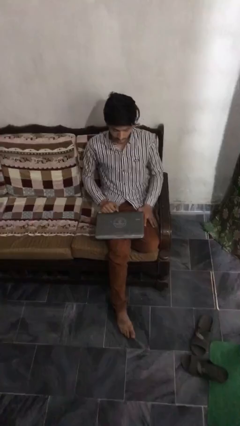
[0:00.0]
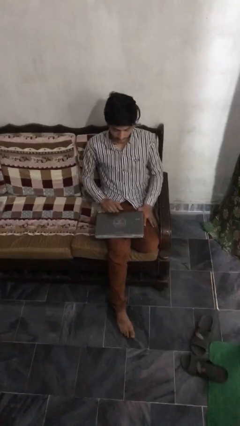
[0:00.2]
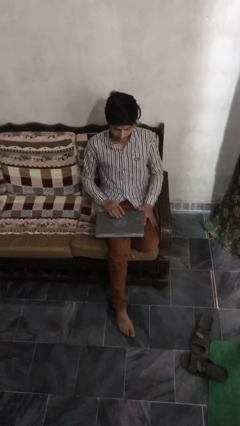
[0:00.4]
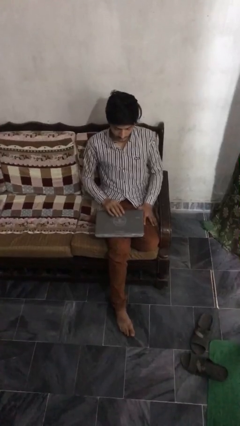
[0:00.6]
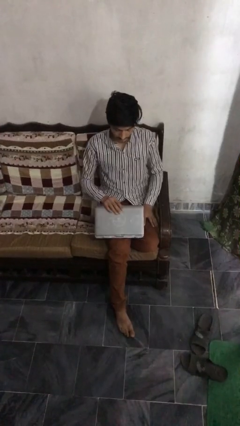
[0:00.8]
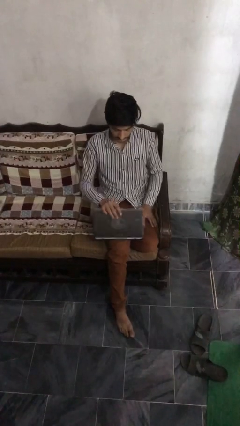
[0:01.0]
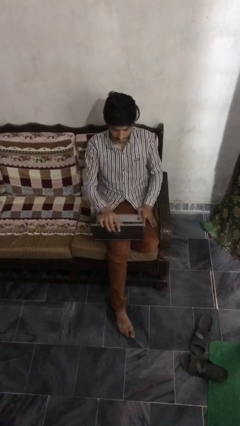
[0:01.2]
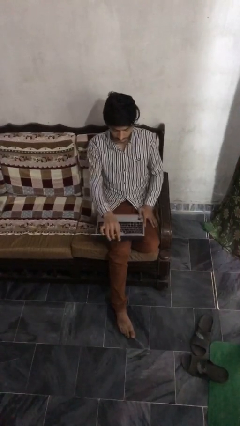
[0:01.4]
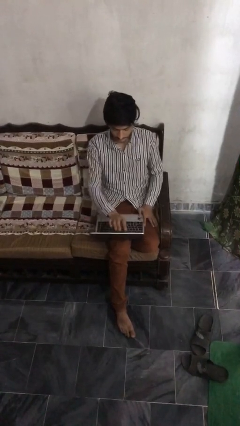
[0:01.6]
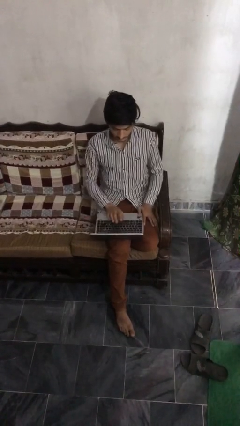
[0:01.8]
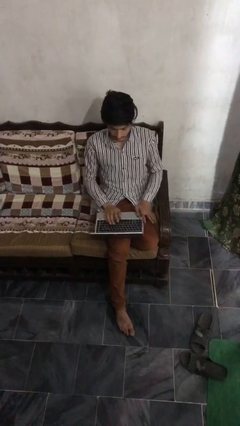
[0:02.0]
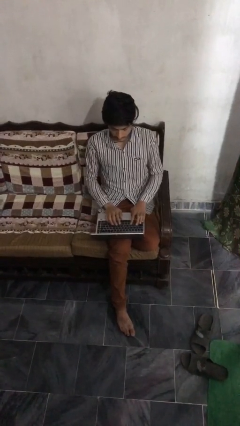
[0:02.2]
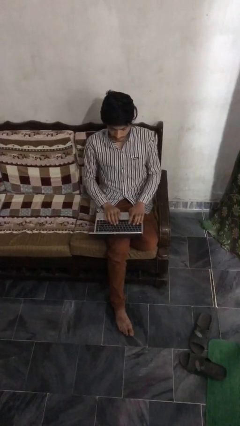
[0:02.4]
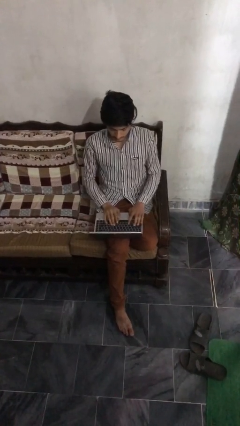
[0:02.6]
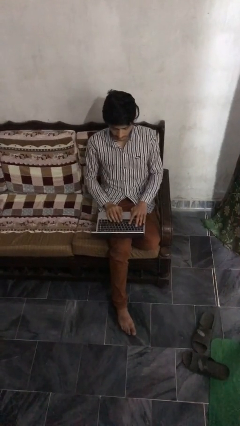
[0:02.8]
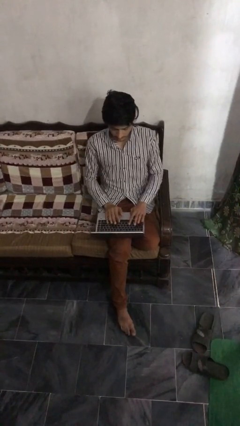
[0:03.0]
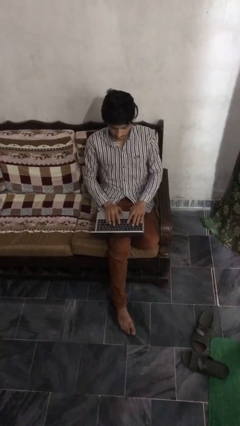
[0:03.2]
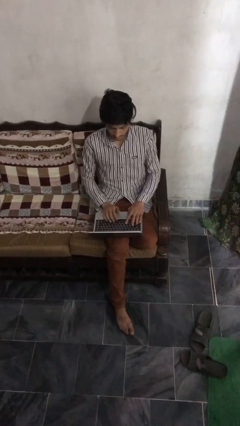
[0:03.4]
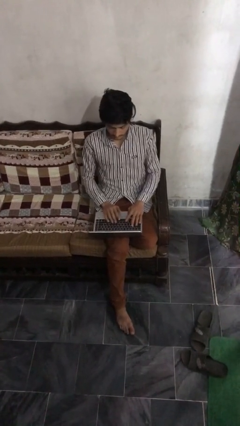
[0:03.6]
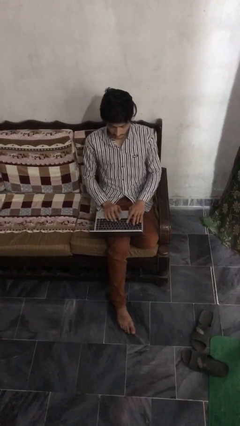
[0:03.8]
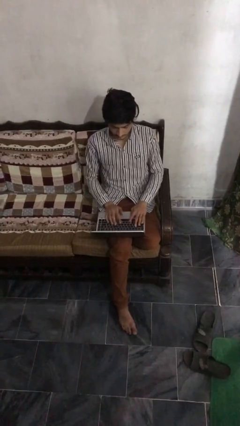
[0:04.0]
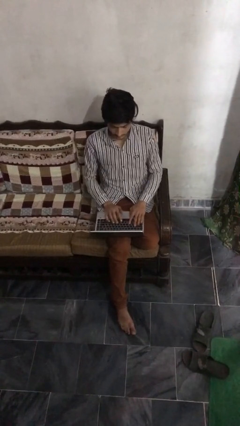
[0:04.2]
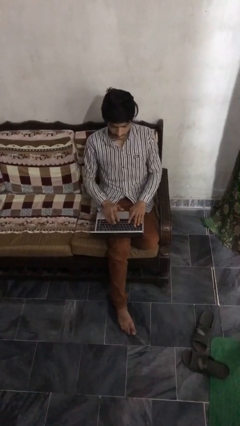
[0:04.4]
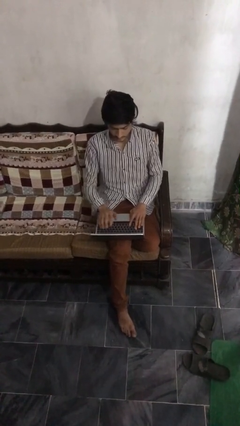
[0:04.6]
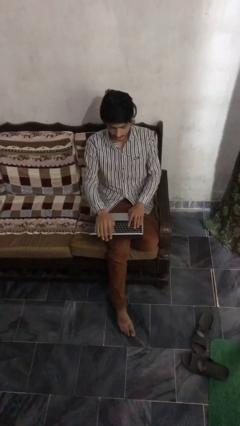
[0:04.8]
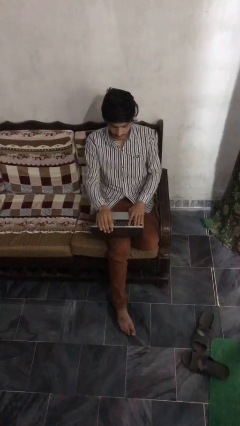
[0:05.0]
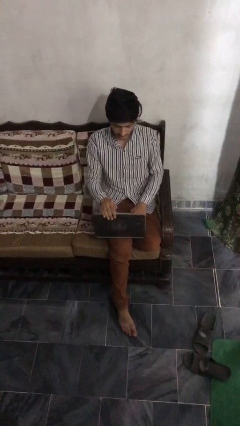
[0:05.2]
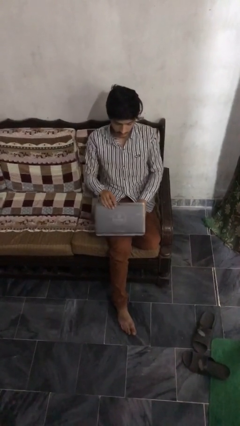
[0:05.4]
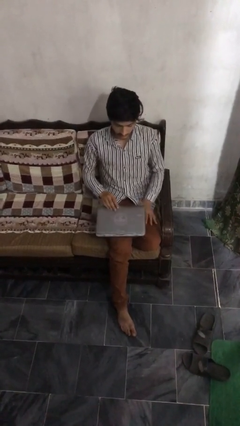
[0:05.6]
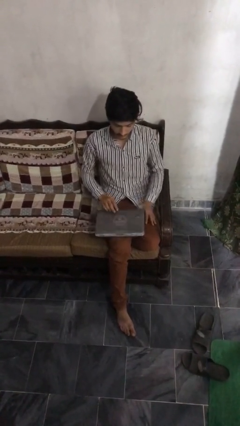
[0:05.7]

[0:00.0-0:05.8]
person interacts with laptop

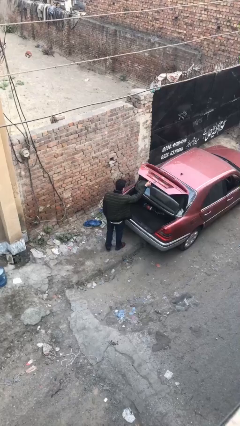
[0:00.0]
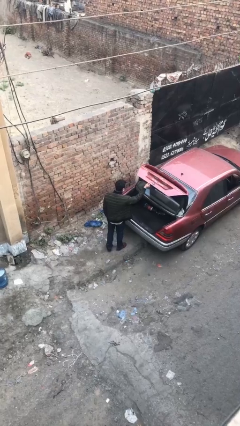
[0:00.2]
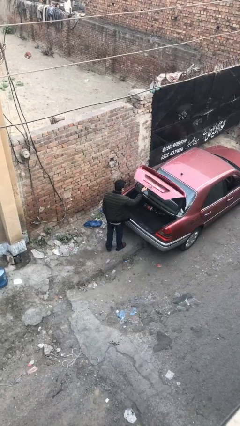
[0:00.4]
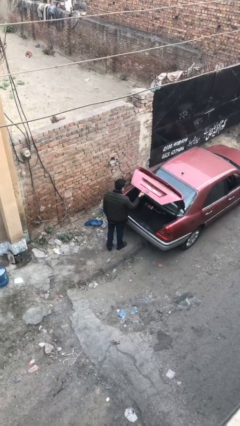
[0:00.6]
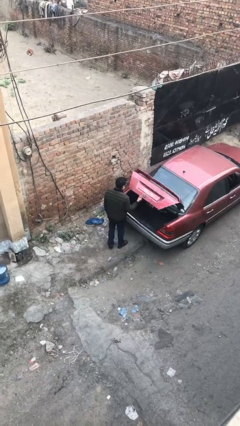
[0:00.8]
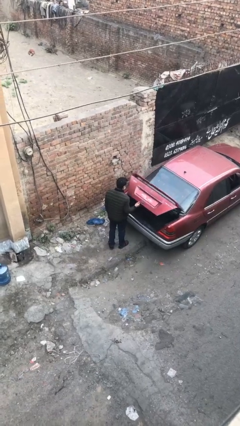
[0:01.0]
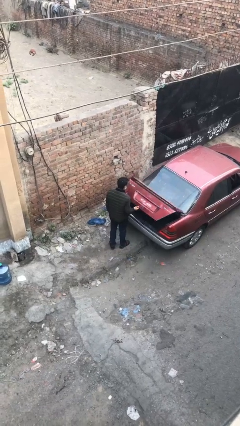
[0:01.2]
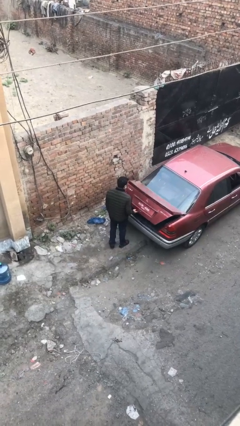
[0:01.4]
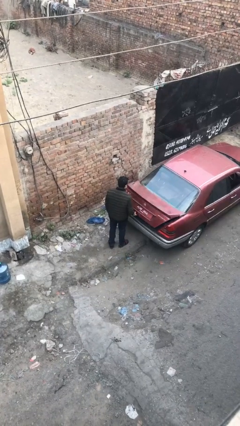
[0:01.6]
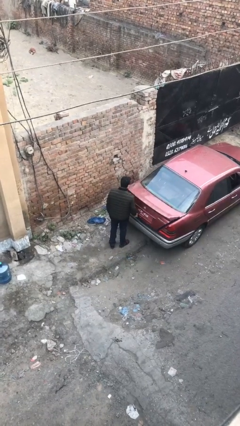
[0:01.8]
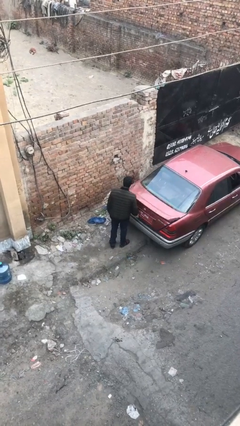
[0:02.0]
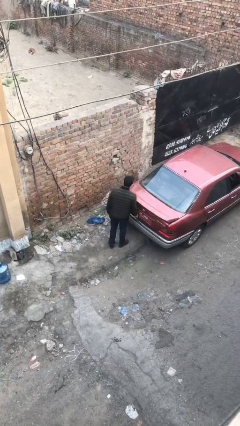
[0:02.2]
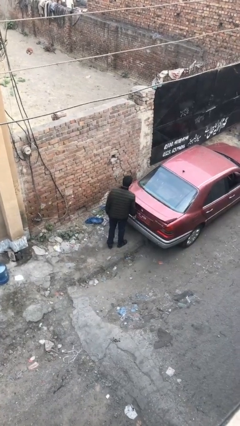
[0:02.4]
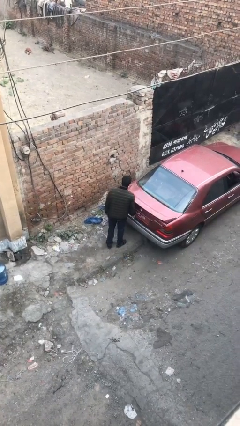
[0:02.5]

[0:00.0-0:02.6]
person closes car trunk

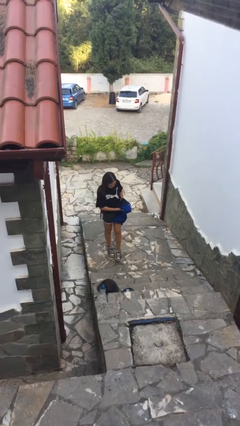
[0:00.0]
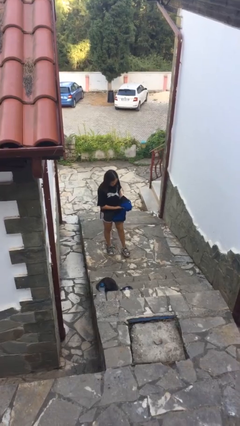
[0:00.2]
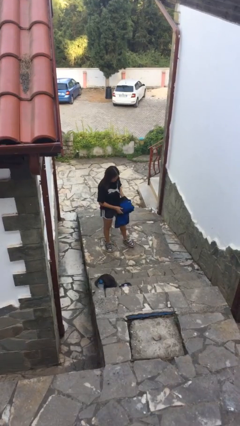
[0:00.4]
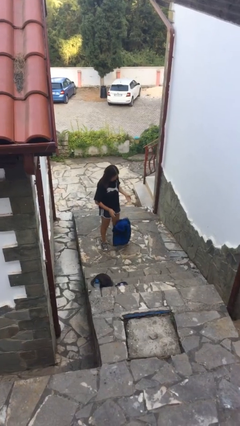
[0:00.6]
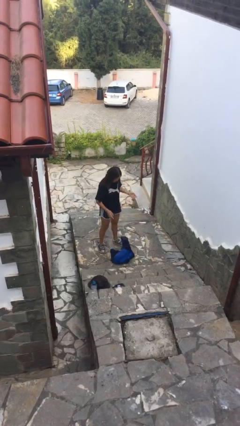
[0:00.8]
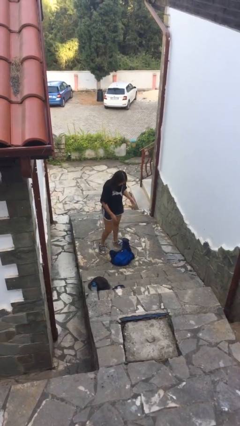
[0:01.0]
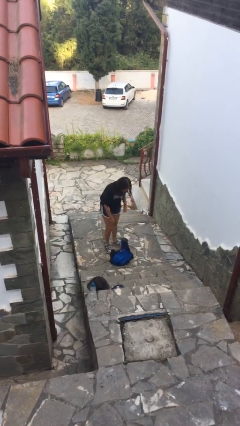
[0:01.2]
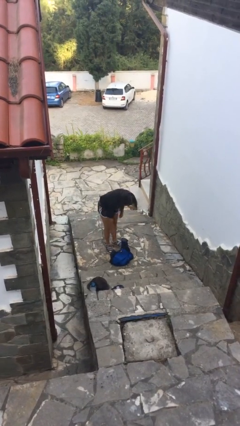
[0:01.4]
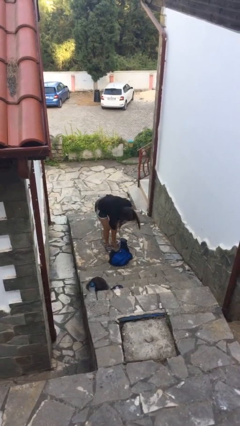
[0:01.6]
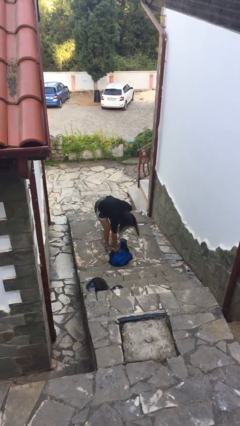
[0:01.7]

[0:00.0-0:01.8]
person drops object

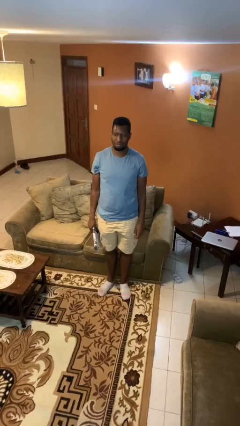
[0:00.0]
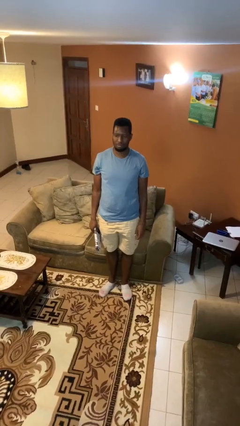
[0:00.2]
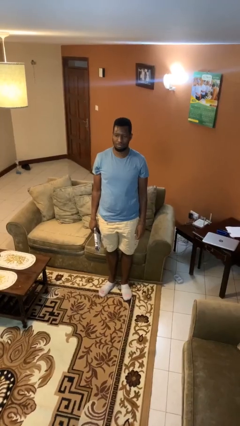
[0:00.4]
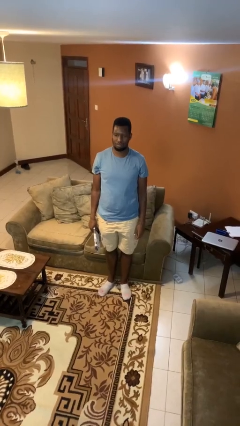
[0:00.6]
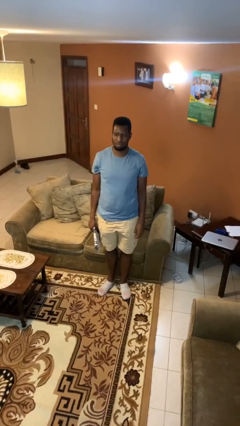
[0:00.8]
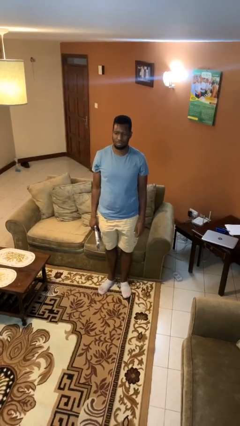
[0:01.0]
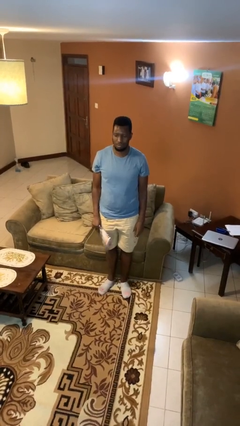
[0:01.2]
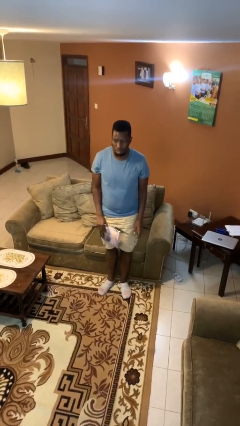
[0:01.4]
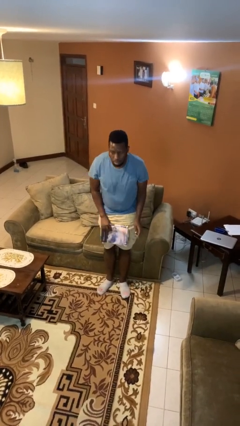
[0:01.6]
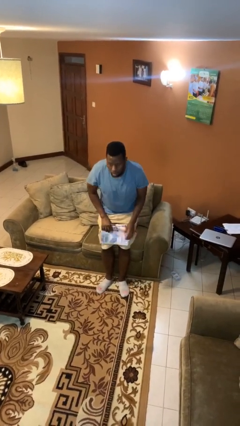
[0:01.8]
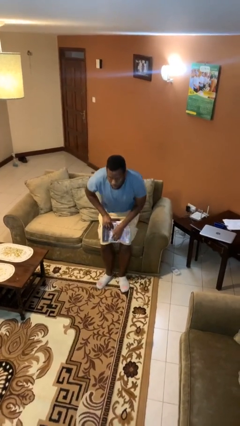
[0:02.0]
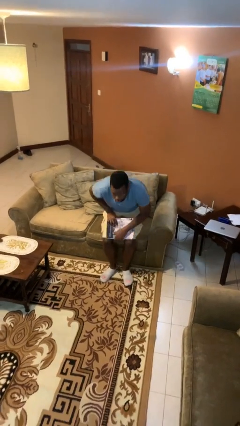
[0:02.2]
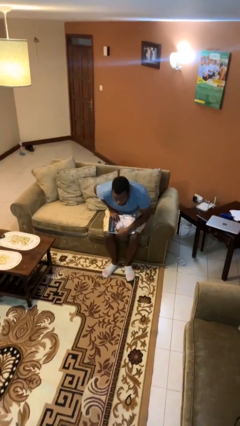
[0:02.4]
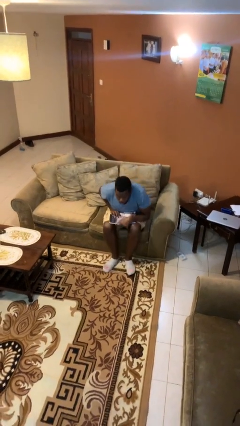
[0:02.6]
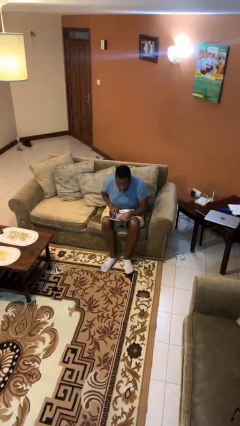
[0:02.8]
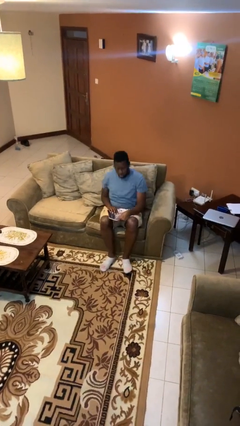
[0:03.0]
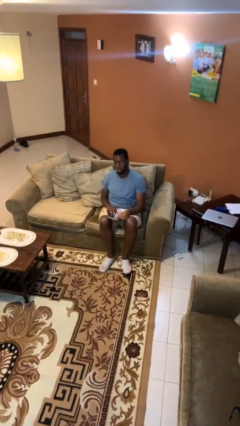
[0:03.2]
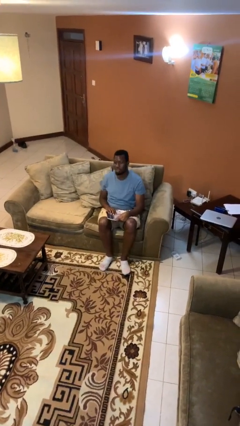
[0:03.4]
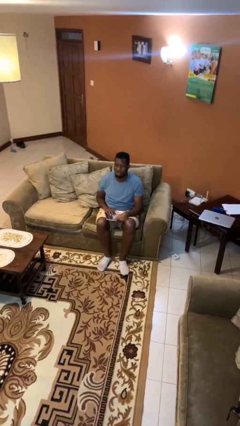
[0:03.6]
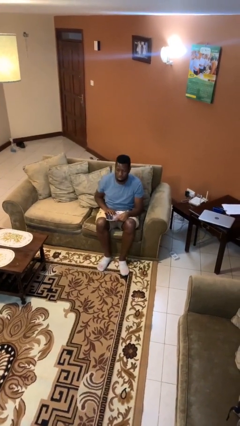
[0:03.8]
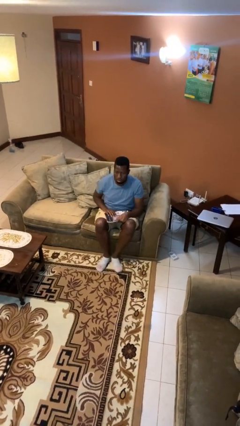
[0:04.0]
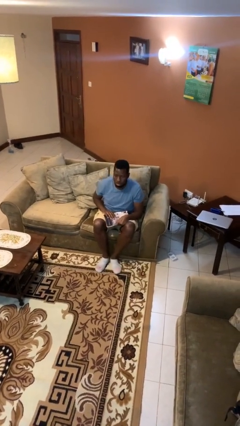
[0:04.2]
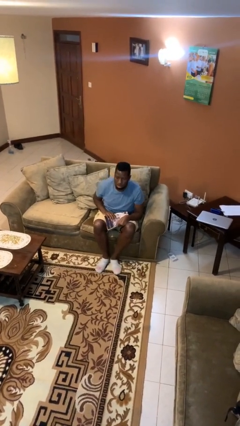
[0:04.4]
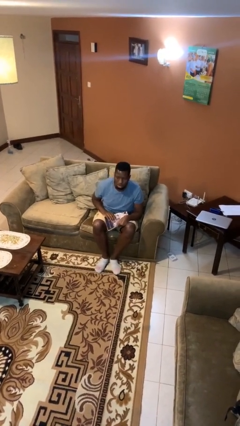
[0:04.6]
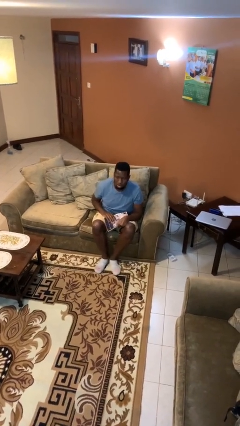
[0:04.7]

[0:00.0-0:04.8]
person sits down

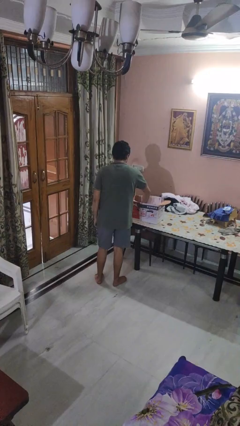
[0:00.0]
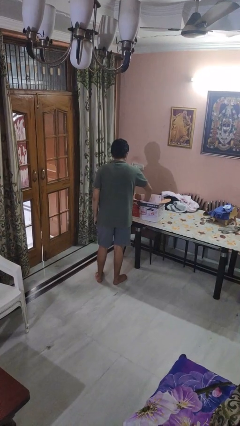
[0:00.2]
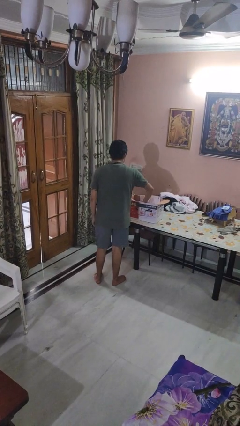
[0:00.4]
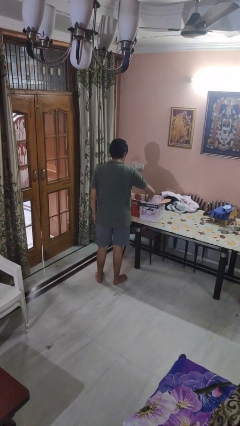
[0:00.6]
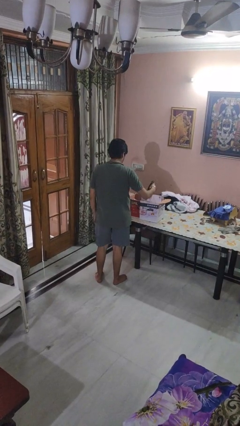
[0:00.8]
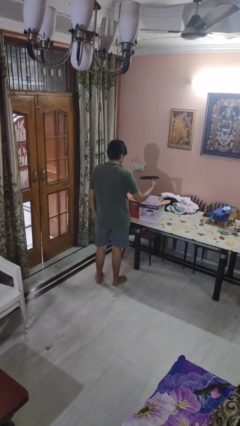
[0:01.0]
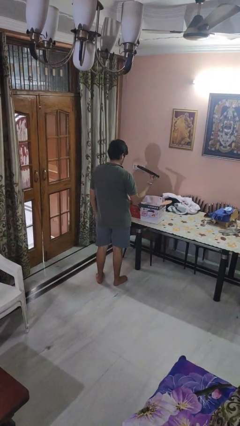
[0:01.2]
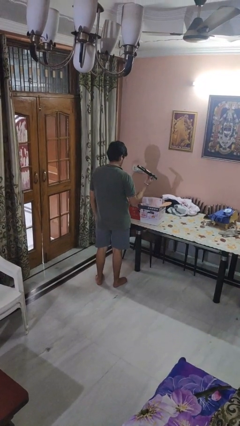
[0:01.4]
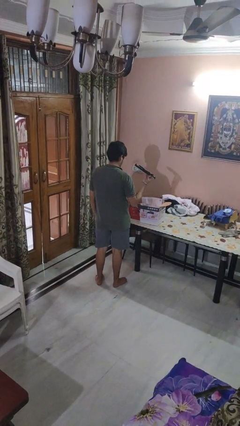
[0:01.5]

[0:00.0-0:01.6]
person takes object from box

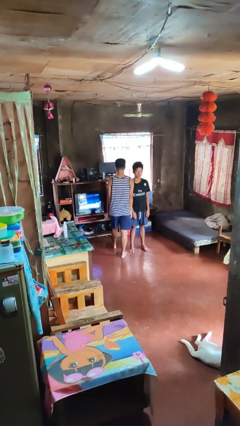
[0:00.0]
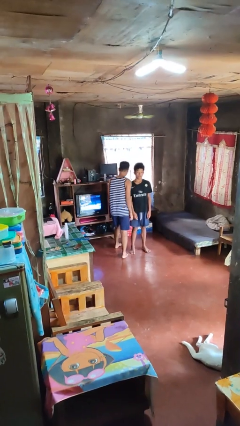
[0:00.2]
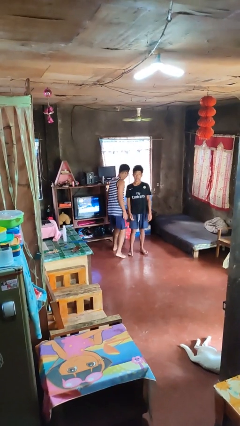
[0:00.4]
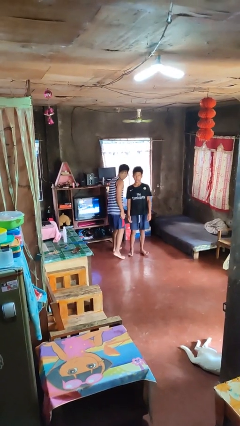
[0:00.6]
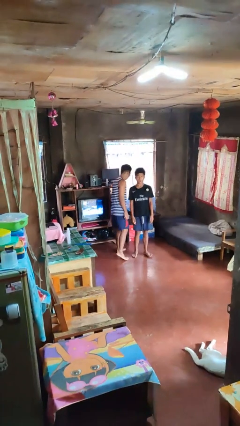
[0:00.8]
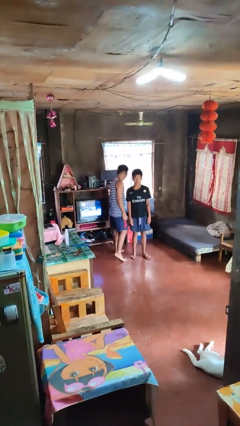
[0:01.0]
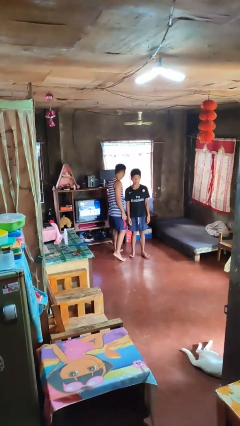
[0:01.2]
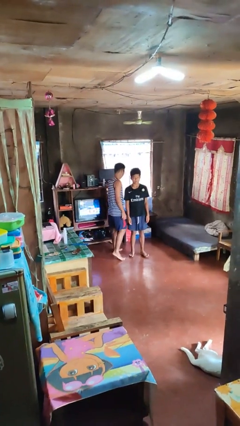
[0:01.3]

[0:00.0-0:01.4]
person bumps into person
